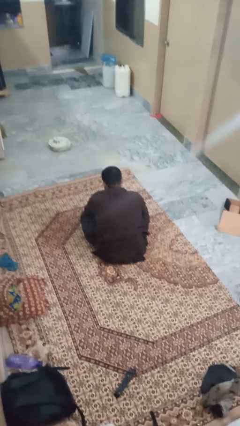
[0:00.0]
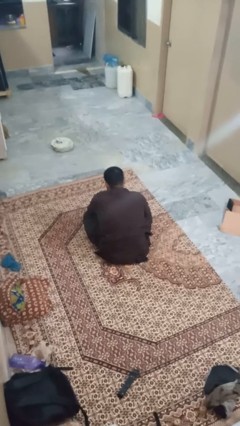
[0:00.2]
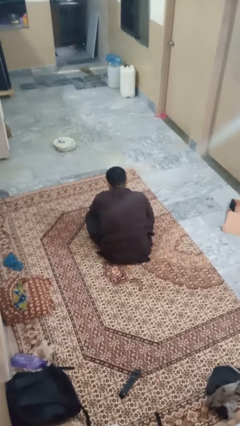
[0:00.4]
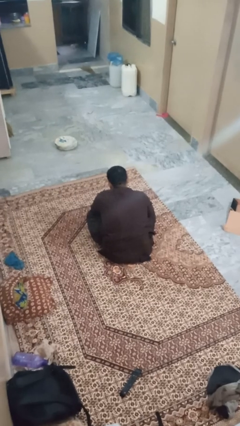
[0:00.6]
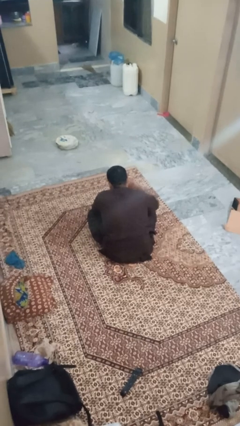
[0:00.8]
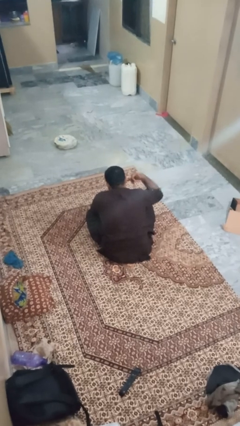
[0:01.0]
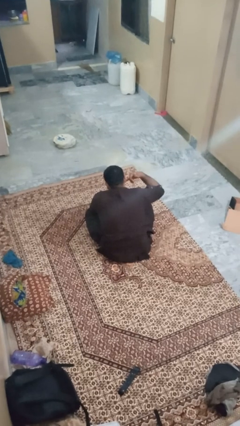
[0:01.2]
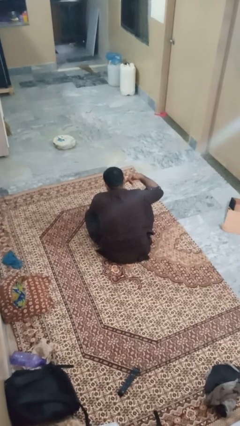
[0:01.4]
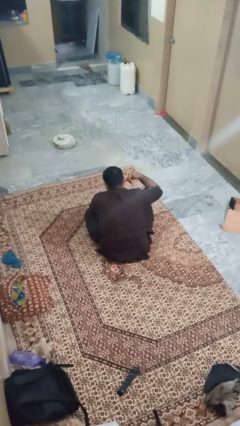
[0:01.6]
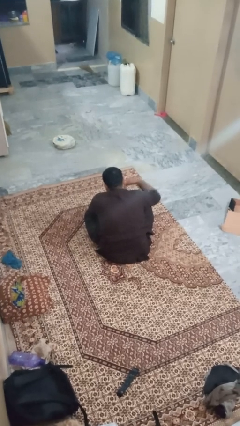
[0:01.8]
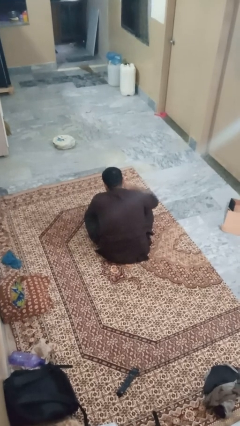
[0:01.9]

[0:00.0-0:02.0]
person gestures call me

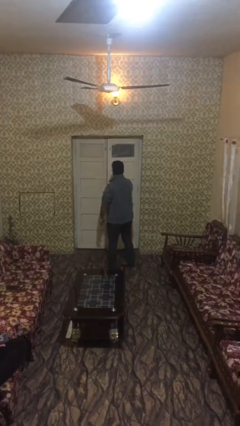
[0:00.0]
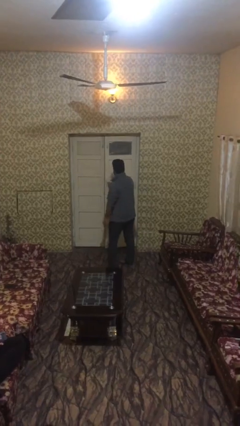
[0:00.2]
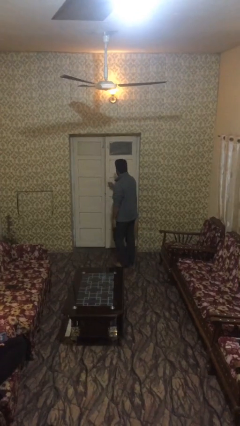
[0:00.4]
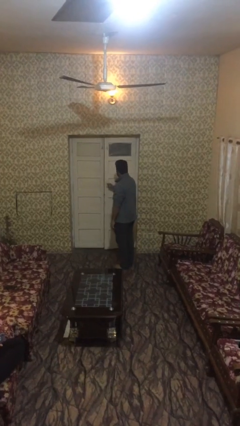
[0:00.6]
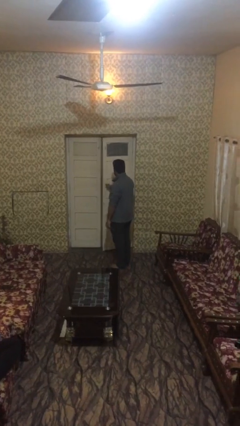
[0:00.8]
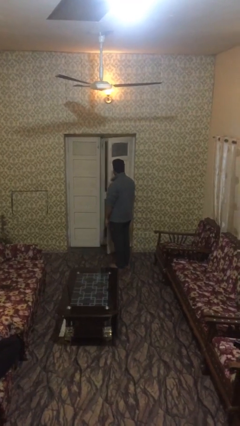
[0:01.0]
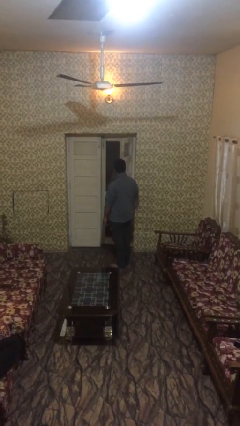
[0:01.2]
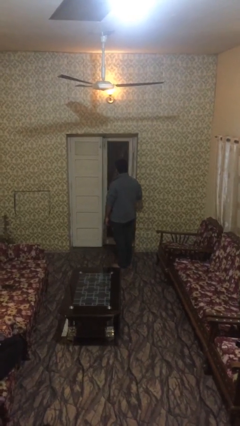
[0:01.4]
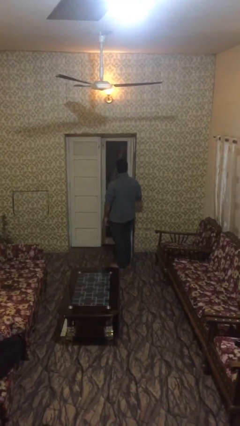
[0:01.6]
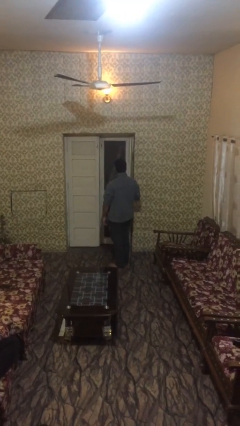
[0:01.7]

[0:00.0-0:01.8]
person opens facility door

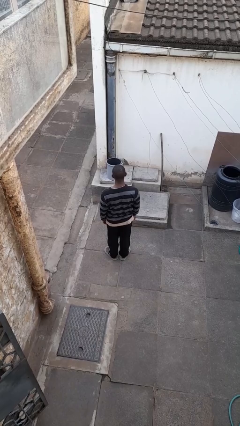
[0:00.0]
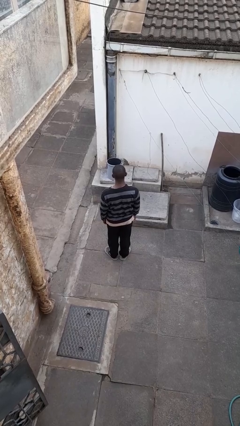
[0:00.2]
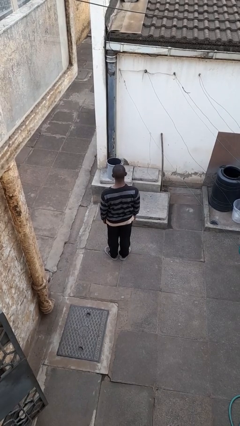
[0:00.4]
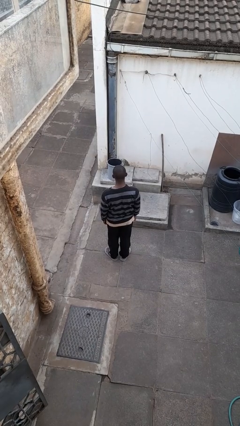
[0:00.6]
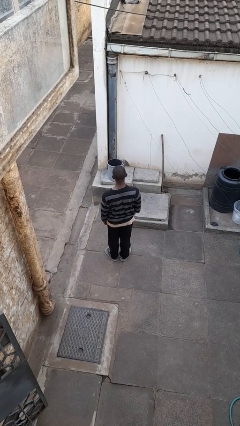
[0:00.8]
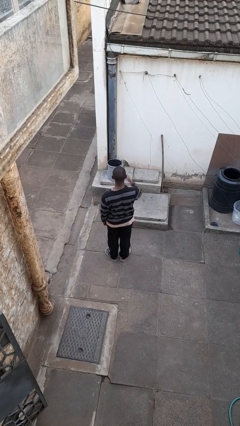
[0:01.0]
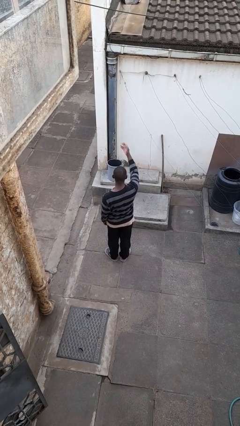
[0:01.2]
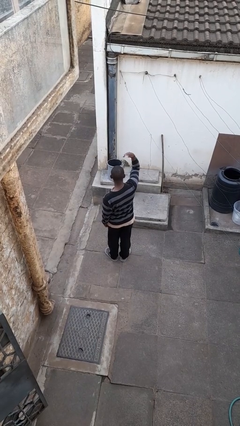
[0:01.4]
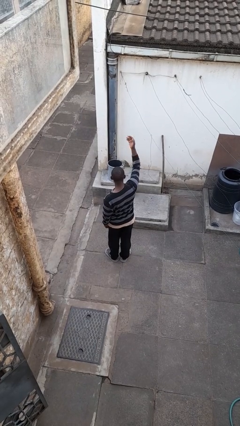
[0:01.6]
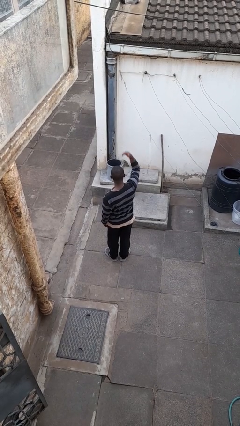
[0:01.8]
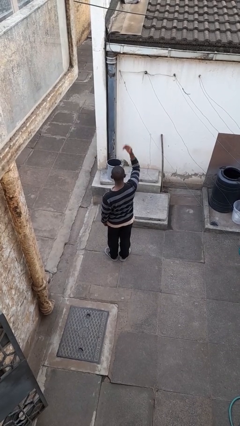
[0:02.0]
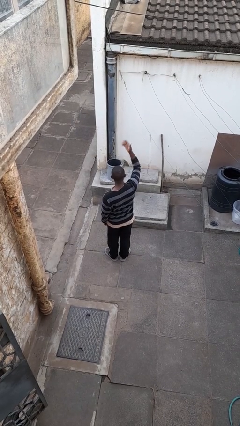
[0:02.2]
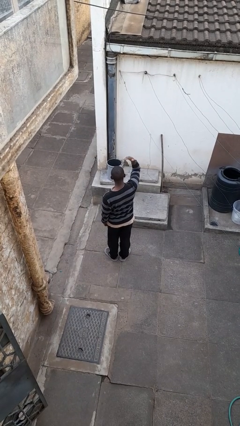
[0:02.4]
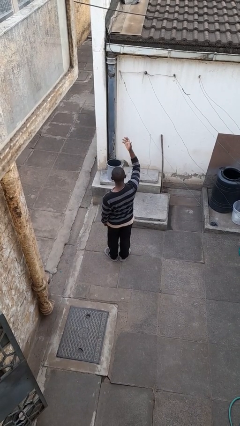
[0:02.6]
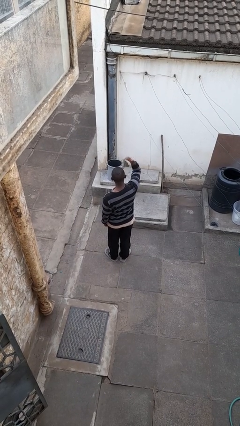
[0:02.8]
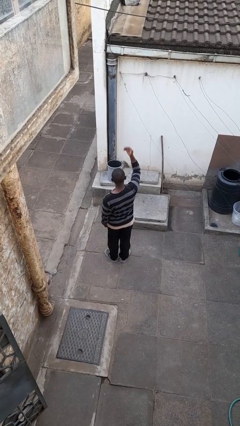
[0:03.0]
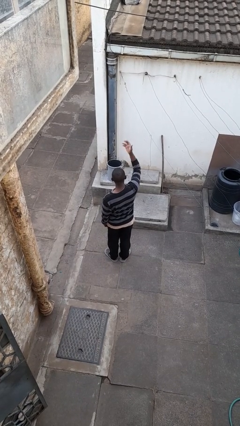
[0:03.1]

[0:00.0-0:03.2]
person gestures come here

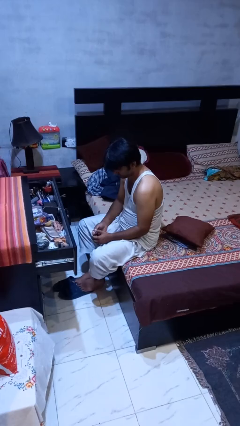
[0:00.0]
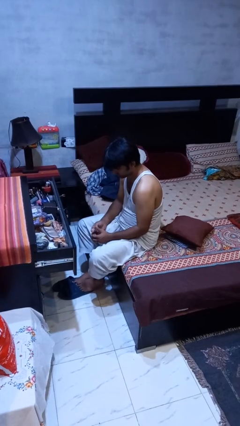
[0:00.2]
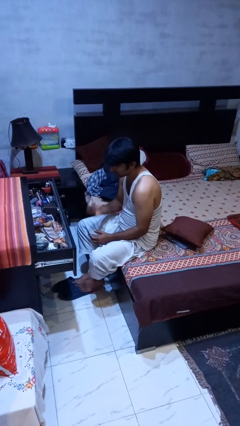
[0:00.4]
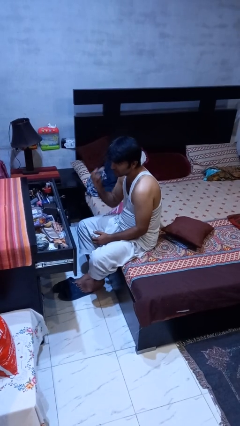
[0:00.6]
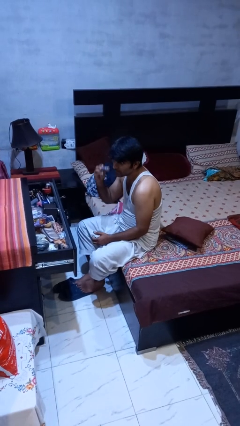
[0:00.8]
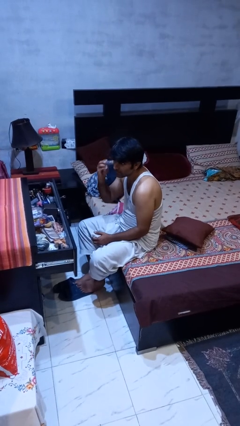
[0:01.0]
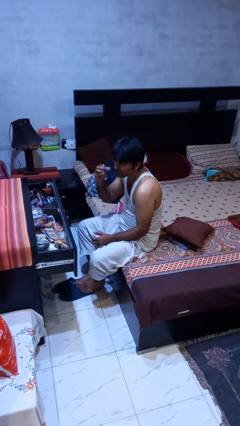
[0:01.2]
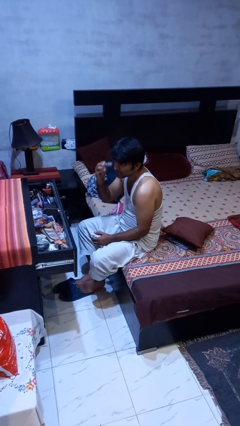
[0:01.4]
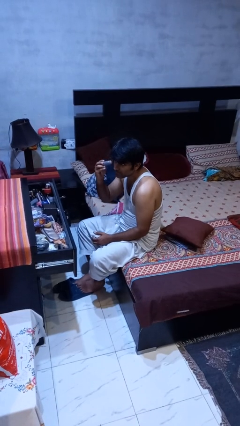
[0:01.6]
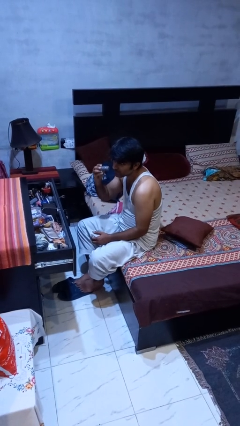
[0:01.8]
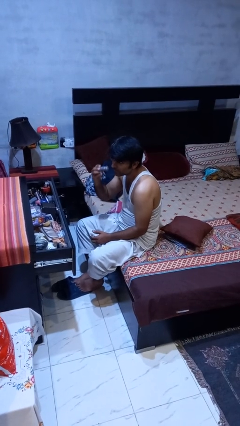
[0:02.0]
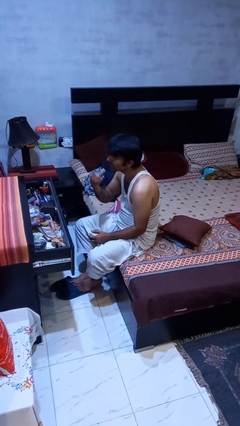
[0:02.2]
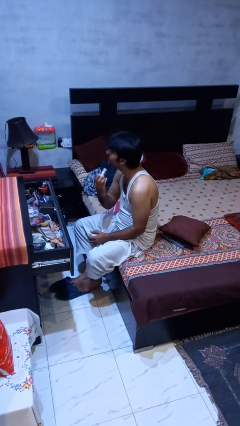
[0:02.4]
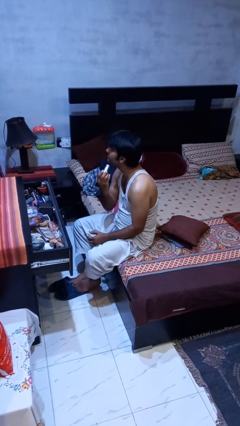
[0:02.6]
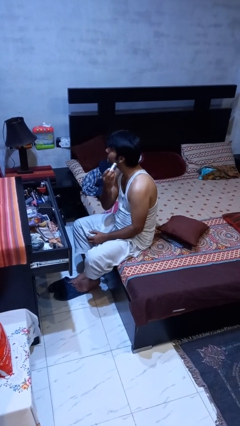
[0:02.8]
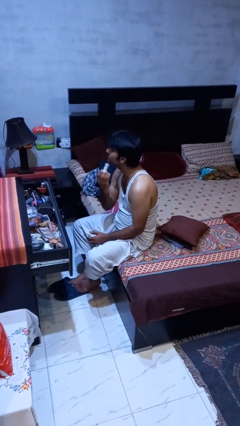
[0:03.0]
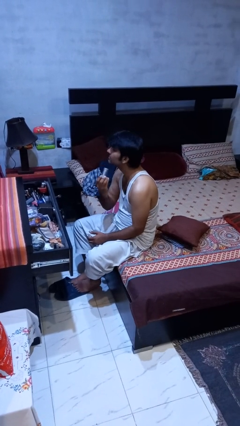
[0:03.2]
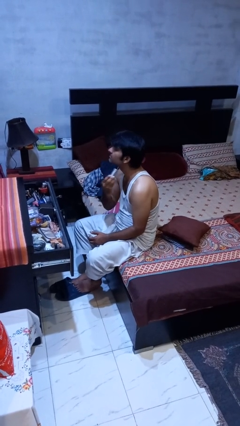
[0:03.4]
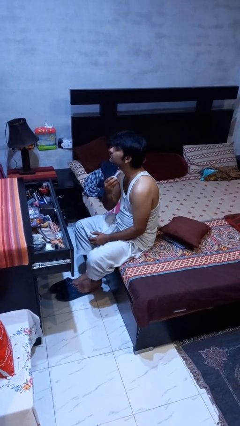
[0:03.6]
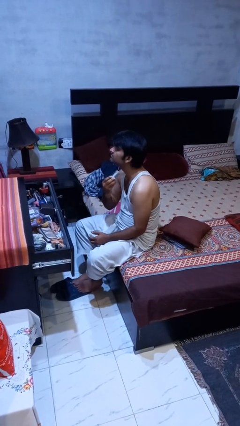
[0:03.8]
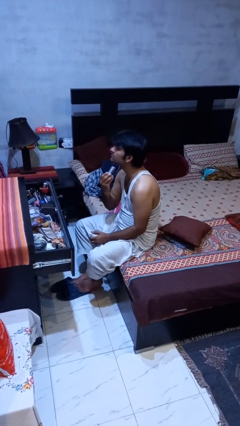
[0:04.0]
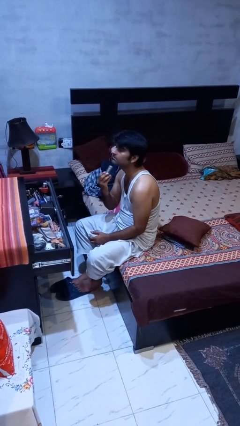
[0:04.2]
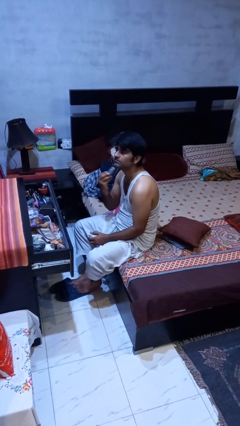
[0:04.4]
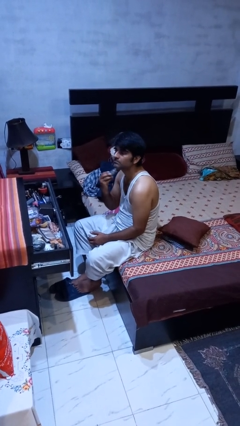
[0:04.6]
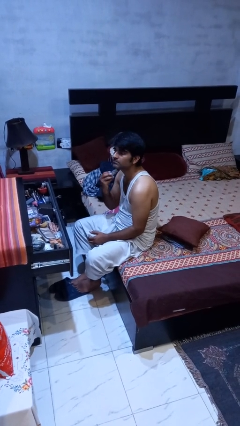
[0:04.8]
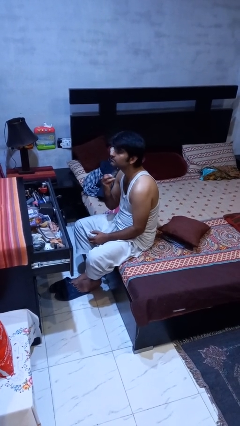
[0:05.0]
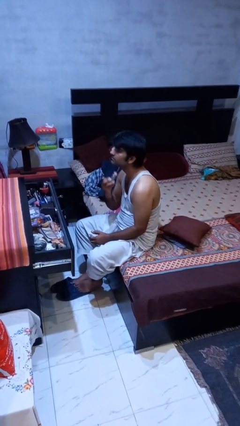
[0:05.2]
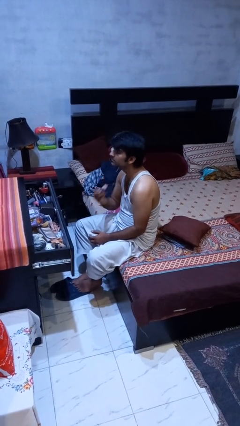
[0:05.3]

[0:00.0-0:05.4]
person applies foundation makeup

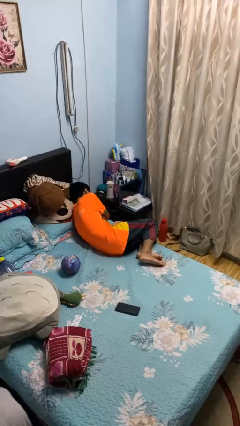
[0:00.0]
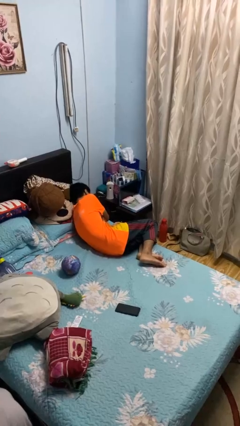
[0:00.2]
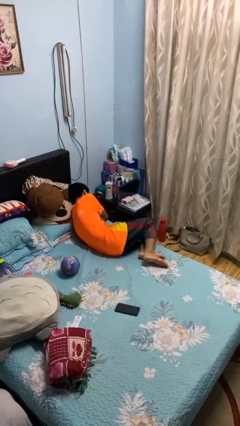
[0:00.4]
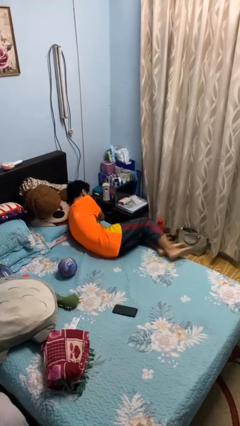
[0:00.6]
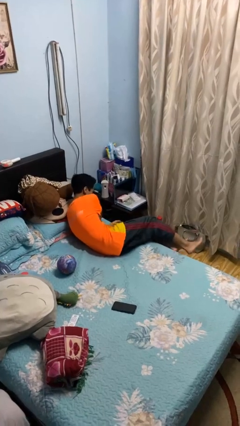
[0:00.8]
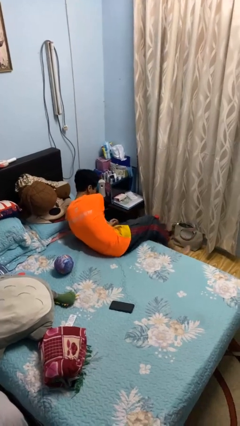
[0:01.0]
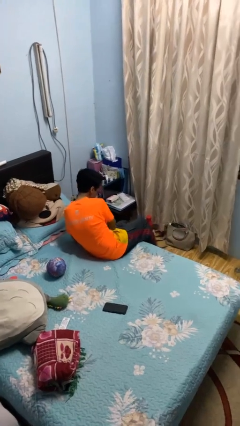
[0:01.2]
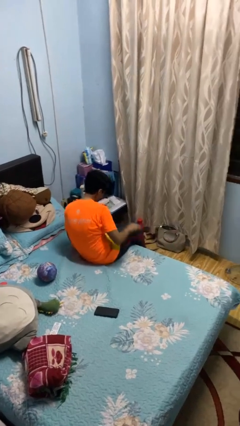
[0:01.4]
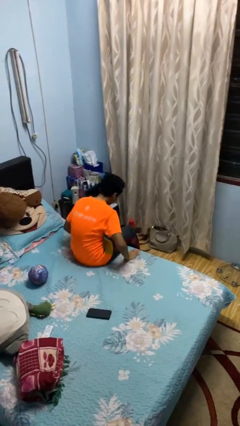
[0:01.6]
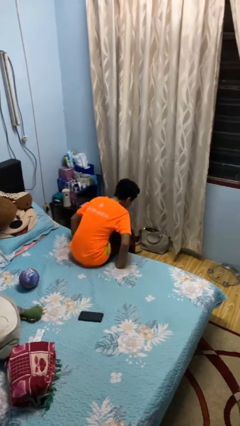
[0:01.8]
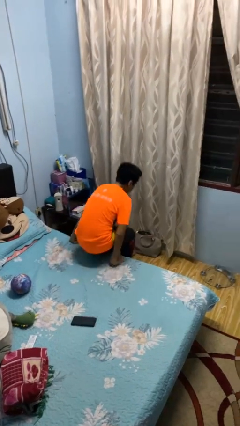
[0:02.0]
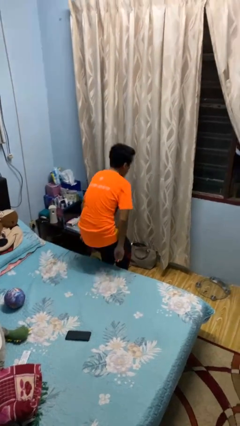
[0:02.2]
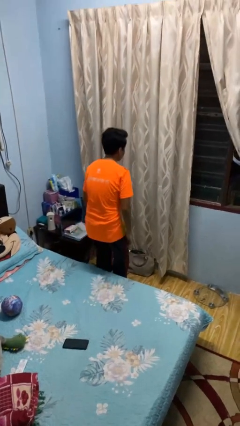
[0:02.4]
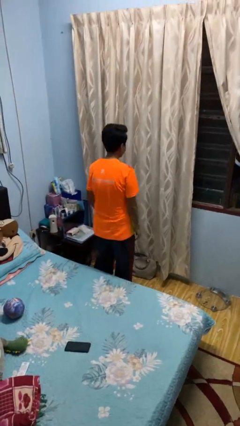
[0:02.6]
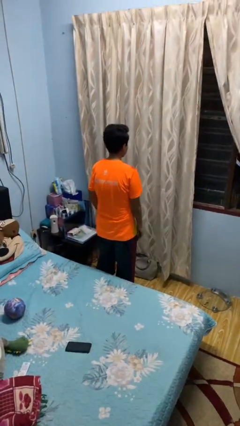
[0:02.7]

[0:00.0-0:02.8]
person stands up

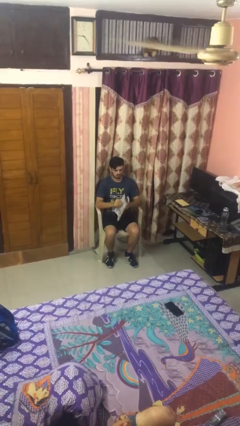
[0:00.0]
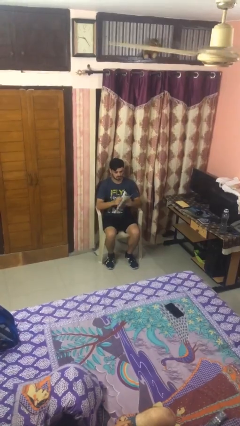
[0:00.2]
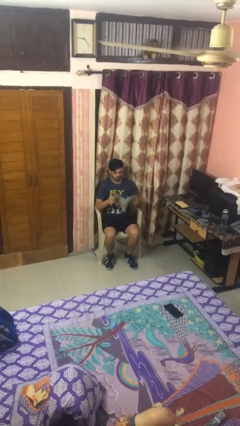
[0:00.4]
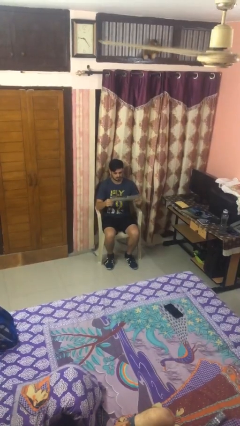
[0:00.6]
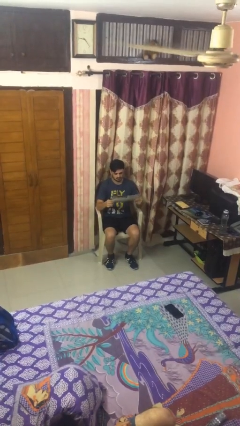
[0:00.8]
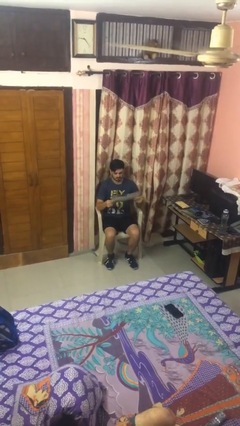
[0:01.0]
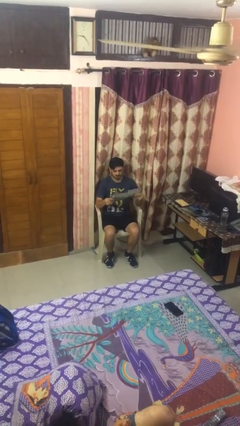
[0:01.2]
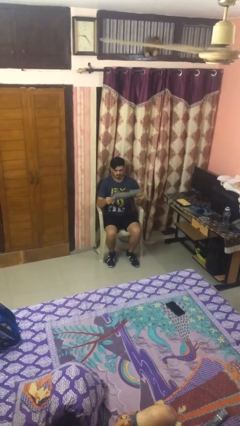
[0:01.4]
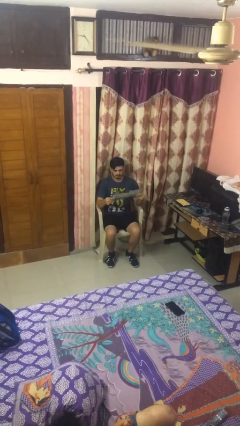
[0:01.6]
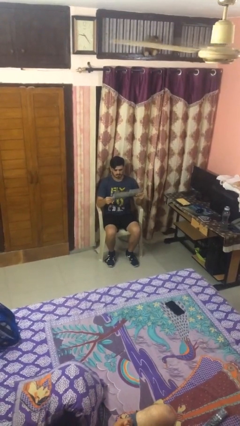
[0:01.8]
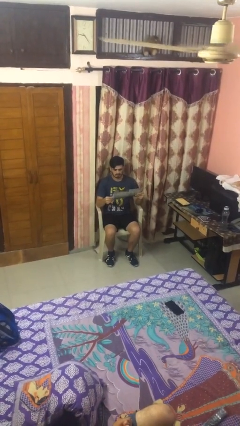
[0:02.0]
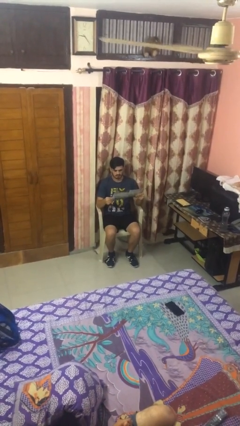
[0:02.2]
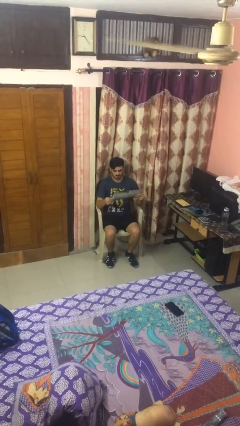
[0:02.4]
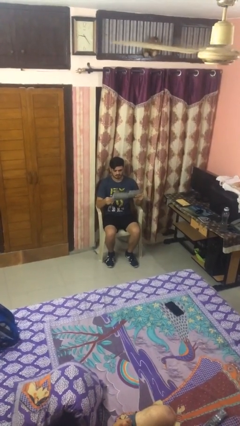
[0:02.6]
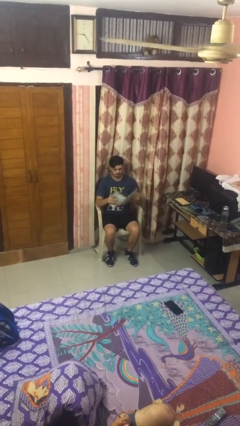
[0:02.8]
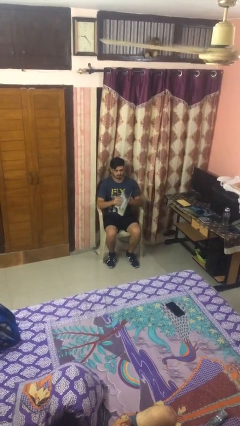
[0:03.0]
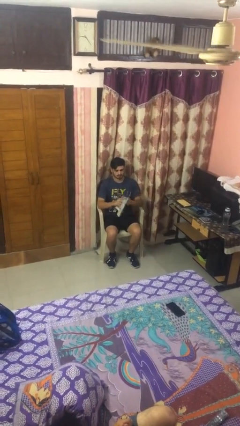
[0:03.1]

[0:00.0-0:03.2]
person reads newspaper
